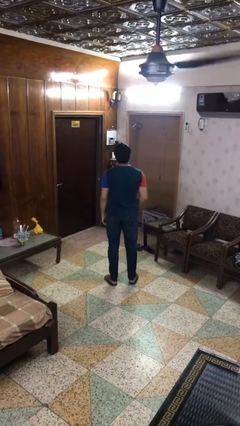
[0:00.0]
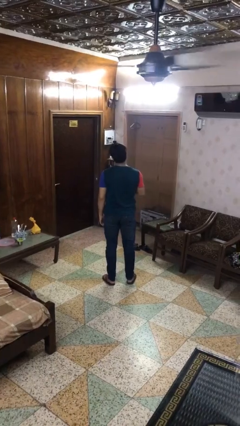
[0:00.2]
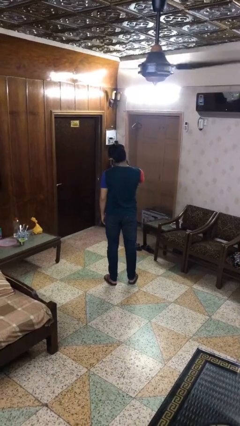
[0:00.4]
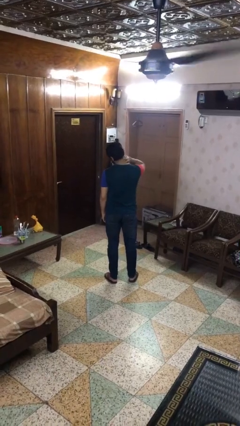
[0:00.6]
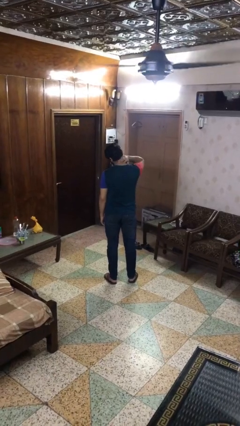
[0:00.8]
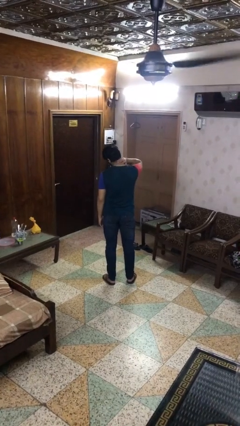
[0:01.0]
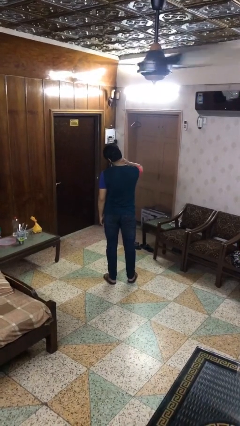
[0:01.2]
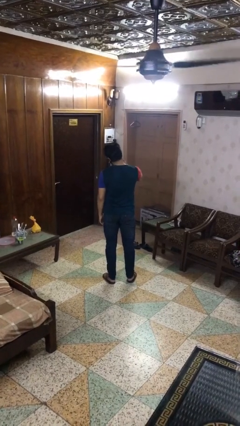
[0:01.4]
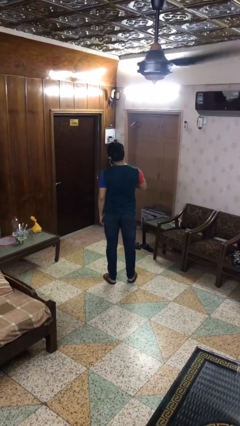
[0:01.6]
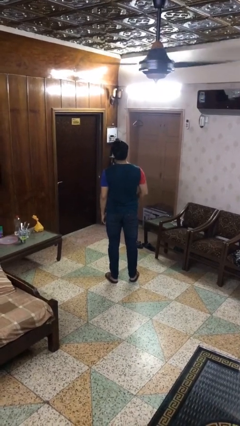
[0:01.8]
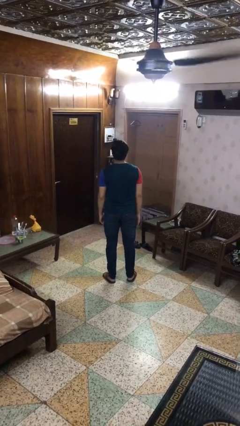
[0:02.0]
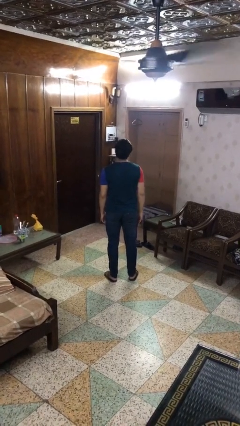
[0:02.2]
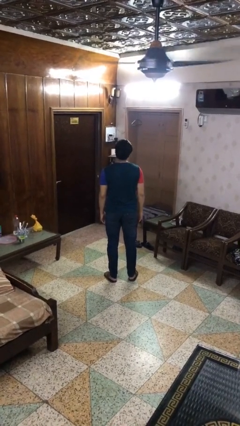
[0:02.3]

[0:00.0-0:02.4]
person rubs neck

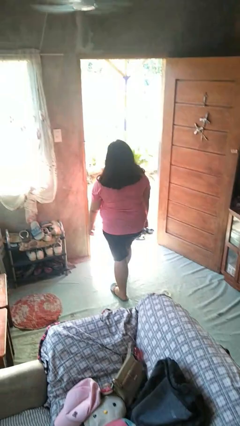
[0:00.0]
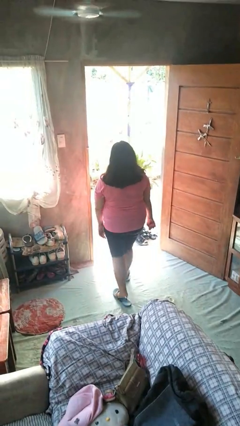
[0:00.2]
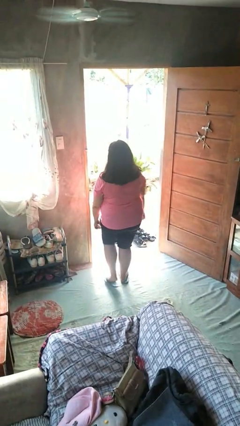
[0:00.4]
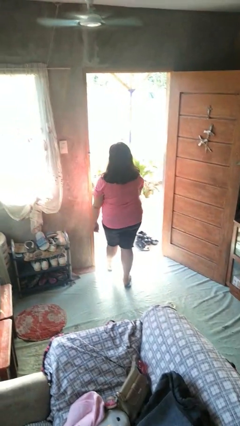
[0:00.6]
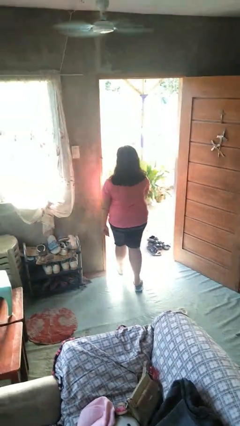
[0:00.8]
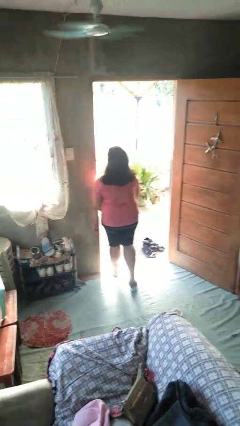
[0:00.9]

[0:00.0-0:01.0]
person bumps into wall

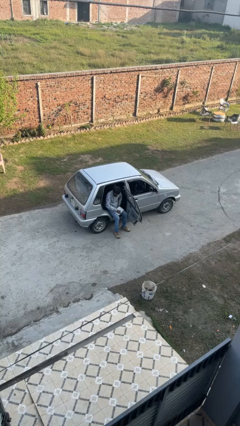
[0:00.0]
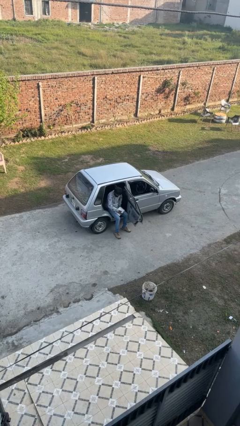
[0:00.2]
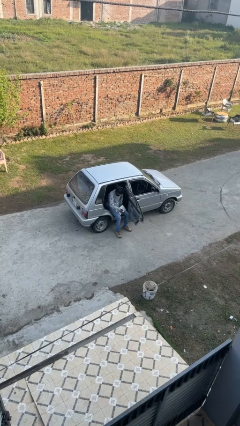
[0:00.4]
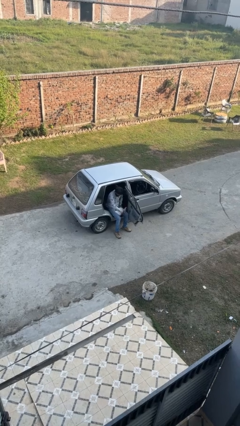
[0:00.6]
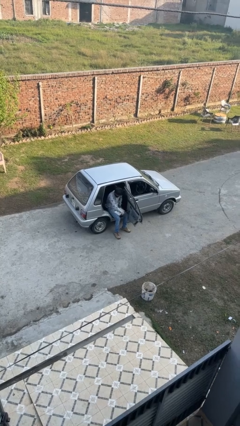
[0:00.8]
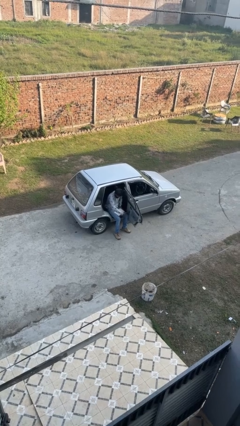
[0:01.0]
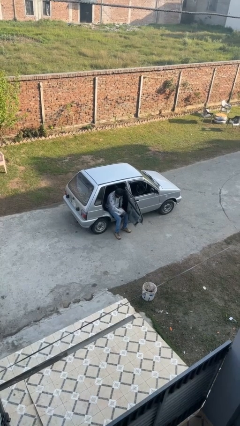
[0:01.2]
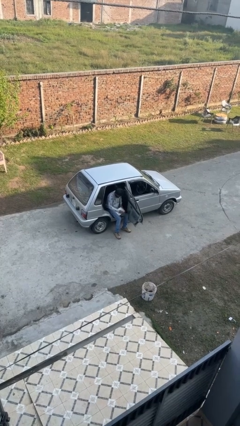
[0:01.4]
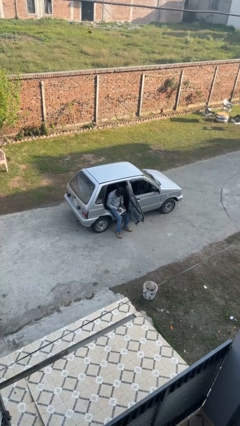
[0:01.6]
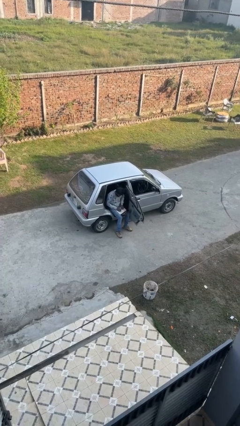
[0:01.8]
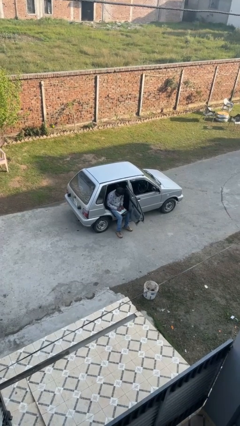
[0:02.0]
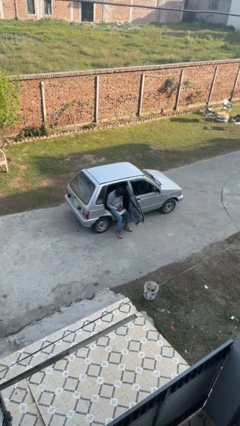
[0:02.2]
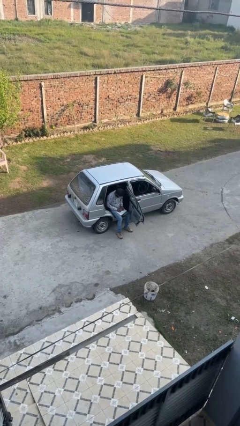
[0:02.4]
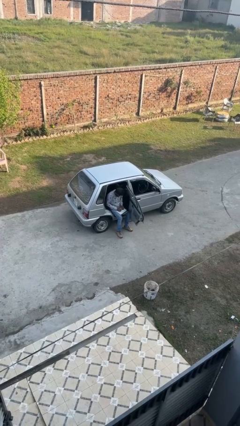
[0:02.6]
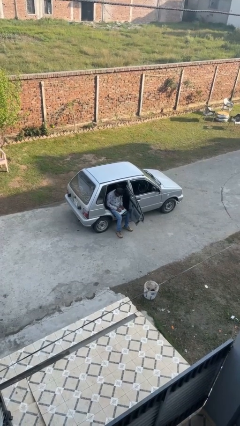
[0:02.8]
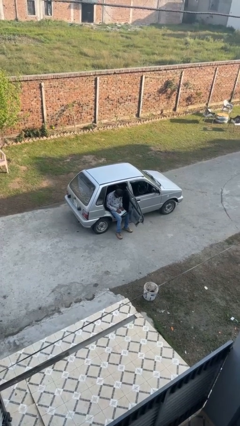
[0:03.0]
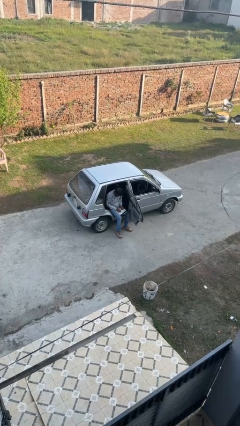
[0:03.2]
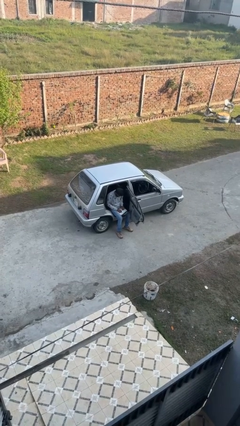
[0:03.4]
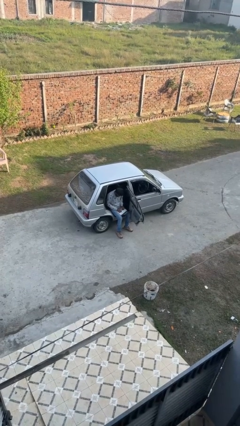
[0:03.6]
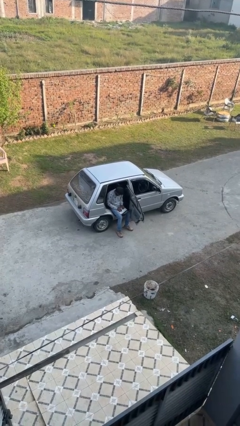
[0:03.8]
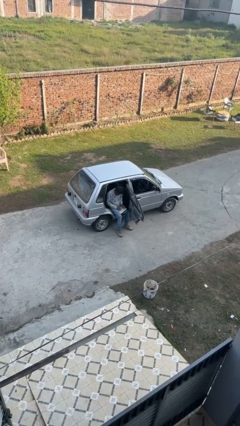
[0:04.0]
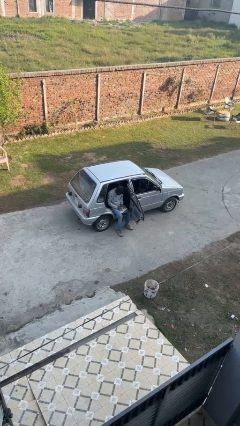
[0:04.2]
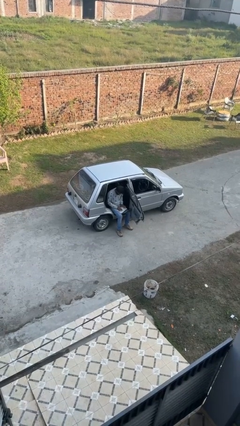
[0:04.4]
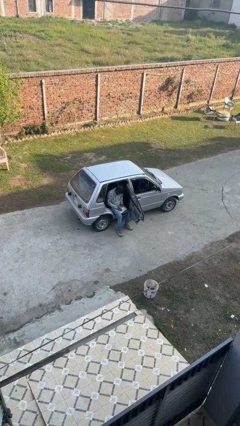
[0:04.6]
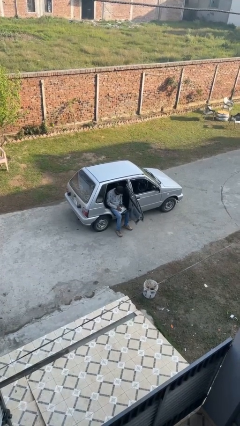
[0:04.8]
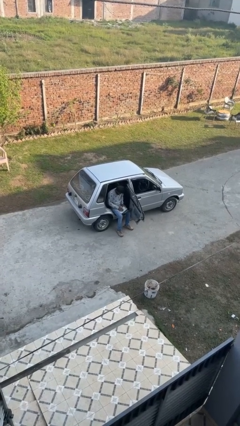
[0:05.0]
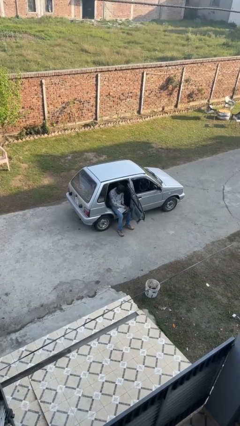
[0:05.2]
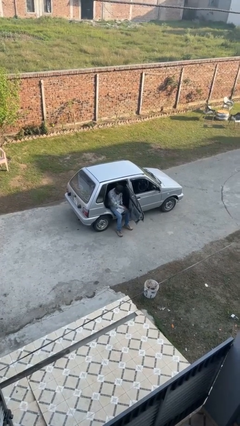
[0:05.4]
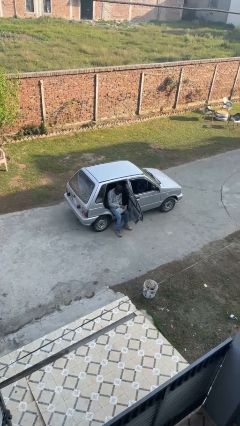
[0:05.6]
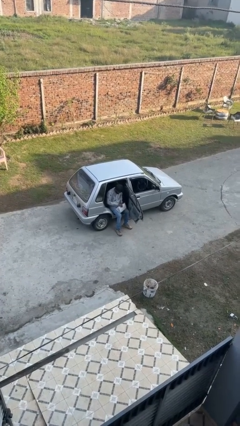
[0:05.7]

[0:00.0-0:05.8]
person interacts with laptop

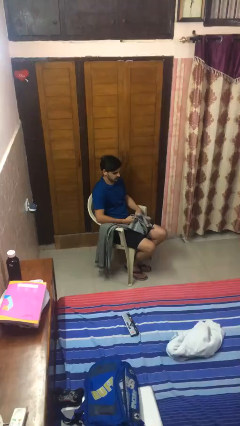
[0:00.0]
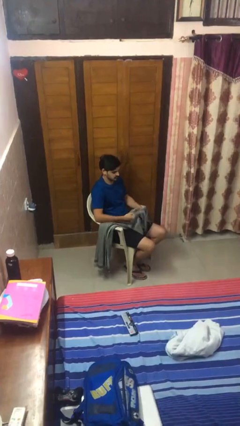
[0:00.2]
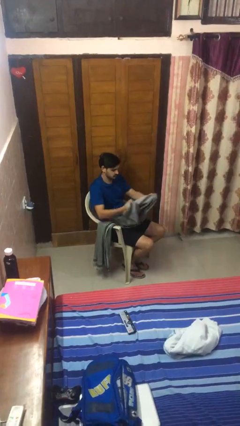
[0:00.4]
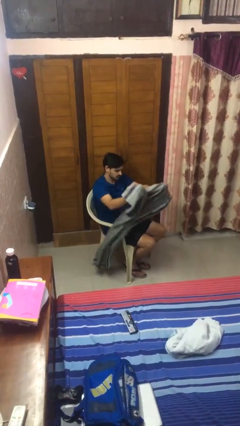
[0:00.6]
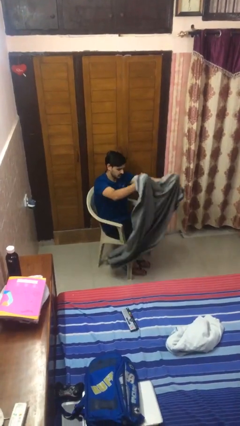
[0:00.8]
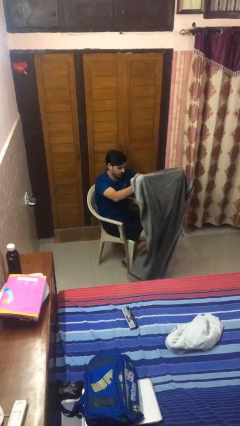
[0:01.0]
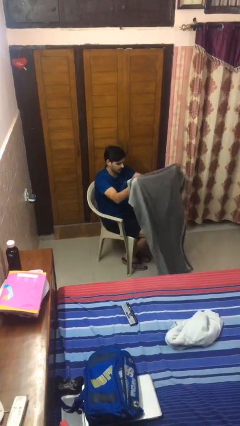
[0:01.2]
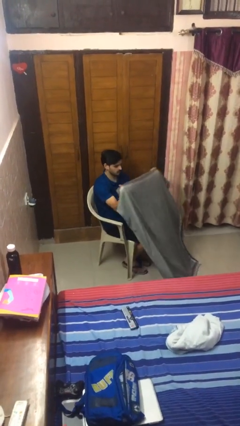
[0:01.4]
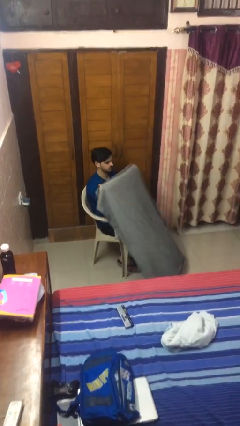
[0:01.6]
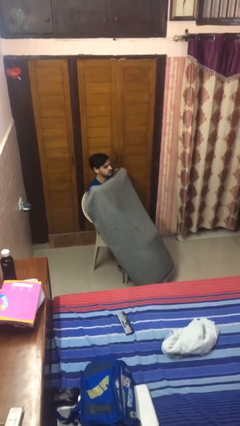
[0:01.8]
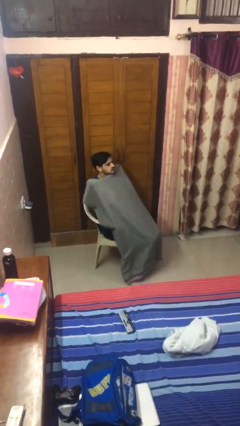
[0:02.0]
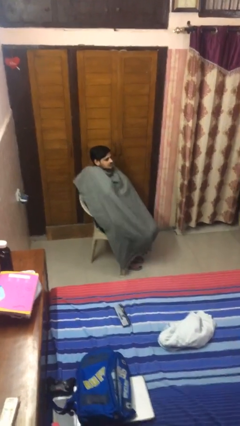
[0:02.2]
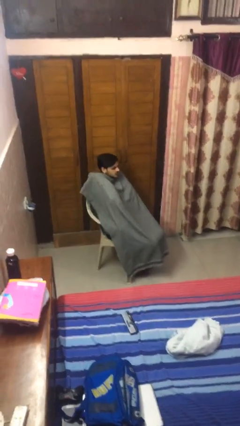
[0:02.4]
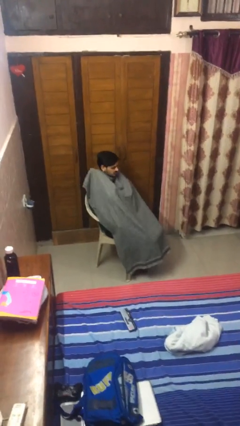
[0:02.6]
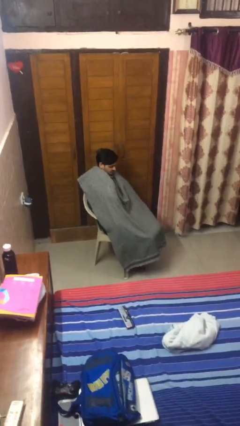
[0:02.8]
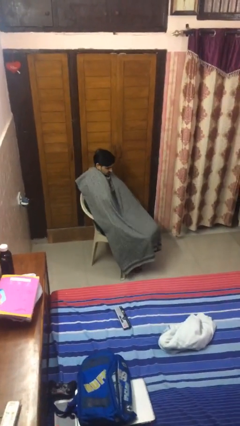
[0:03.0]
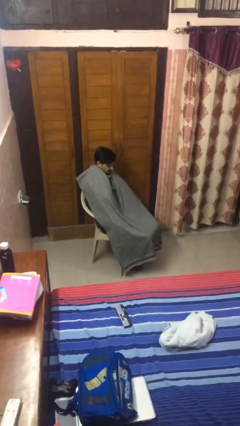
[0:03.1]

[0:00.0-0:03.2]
person covers with blanket

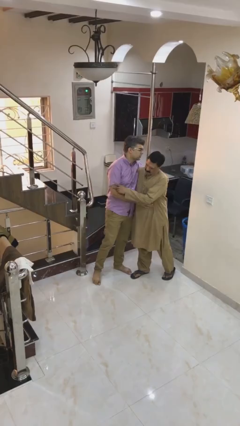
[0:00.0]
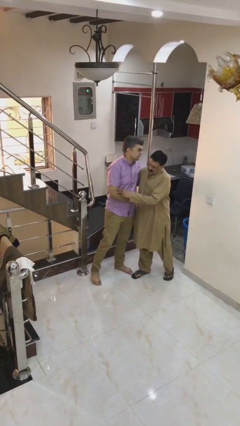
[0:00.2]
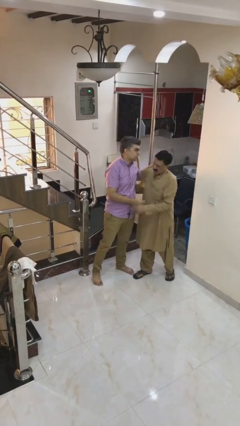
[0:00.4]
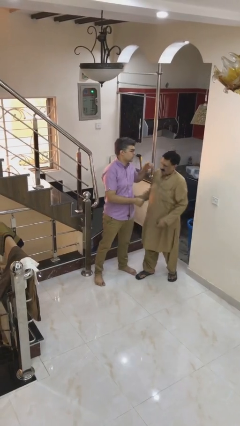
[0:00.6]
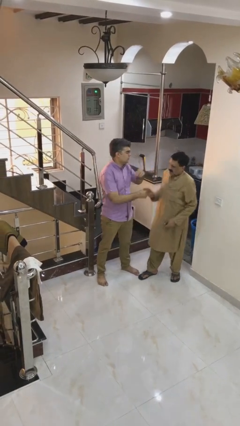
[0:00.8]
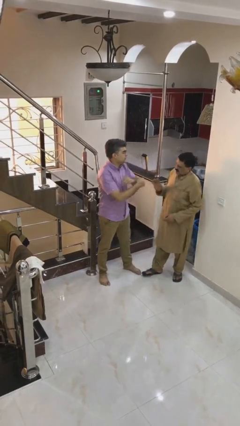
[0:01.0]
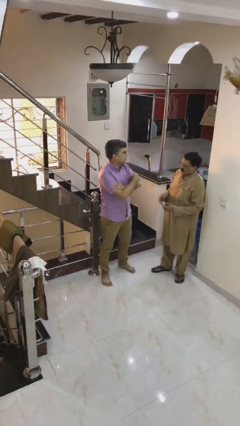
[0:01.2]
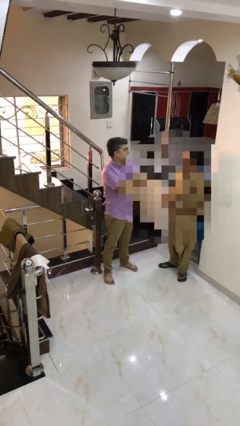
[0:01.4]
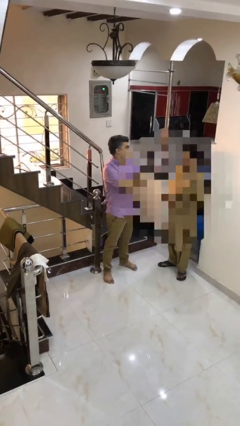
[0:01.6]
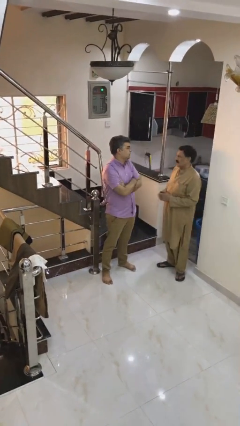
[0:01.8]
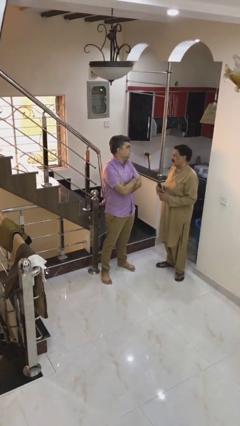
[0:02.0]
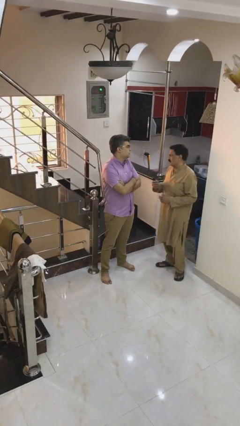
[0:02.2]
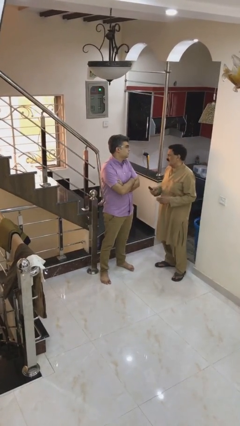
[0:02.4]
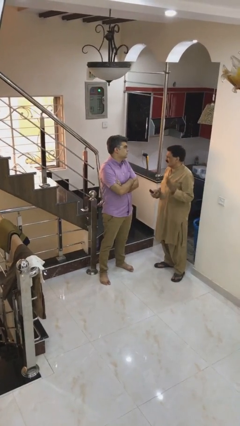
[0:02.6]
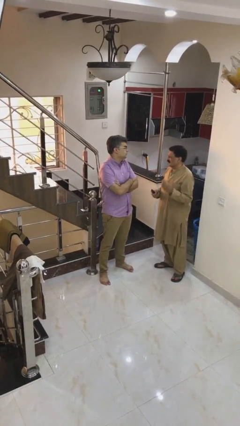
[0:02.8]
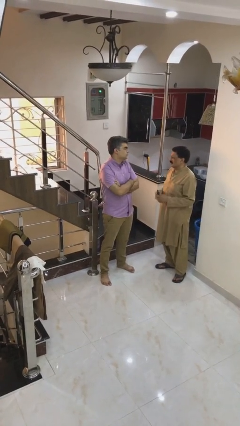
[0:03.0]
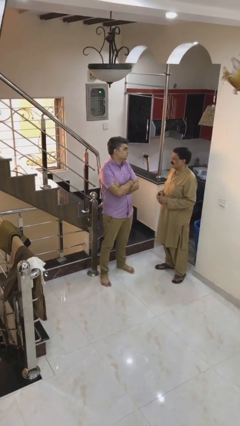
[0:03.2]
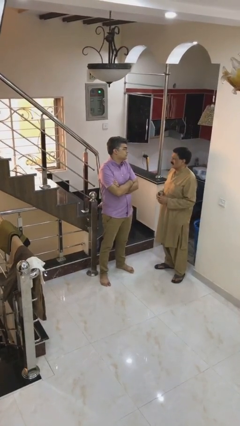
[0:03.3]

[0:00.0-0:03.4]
person talks to person

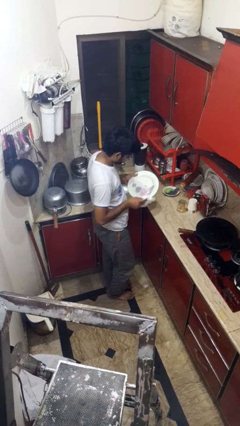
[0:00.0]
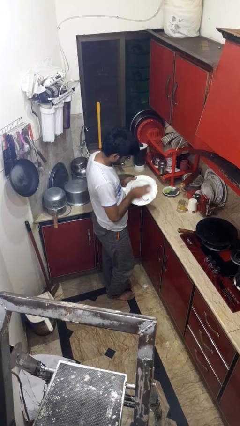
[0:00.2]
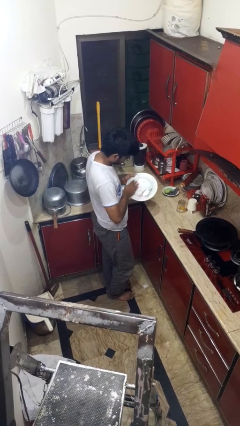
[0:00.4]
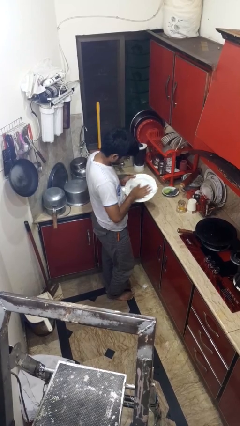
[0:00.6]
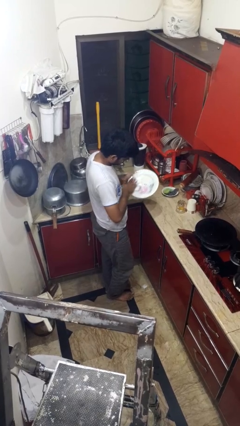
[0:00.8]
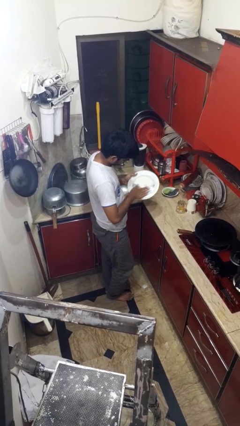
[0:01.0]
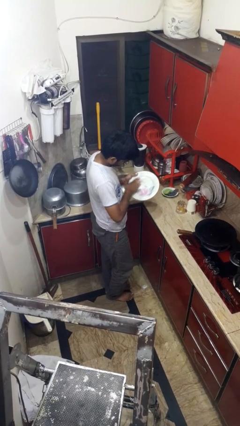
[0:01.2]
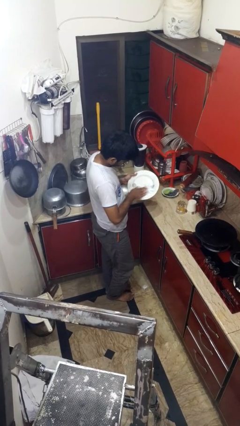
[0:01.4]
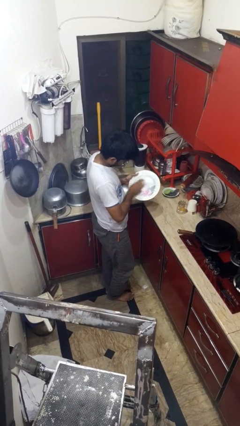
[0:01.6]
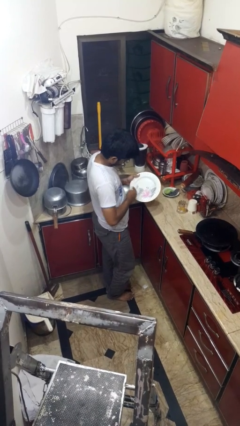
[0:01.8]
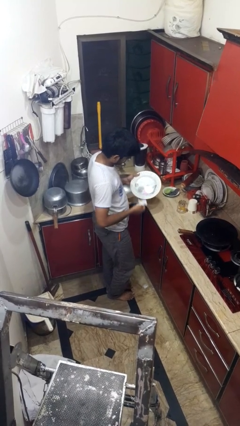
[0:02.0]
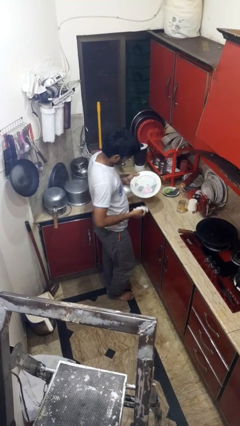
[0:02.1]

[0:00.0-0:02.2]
person dries dish
